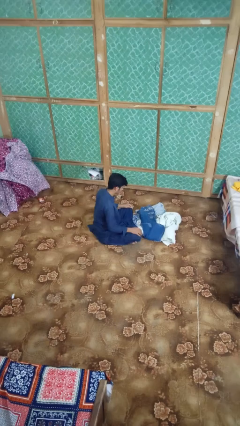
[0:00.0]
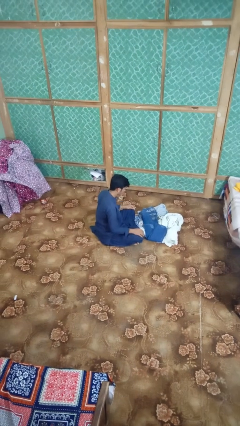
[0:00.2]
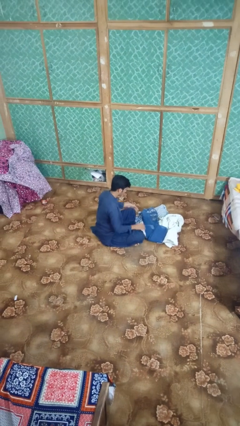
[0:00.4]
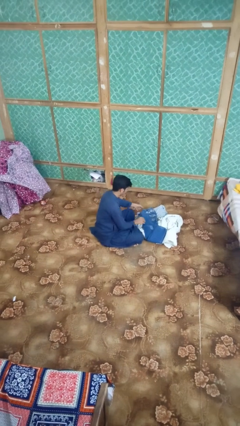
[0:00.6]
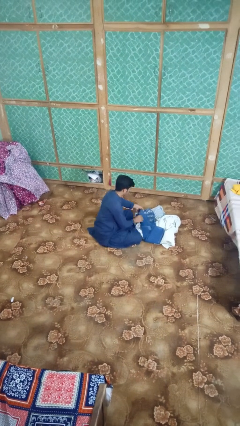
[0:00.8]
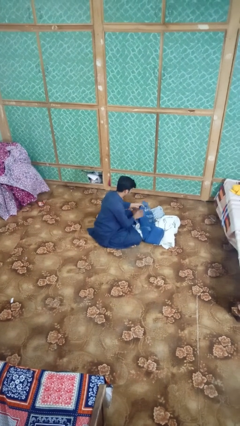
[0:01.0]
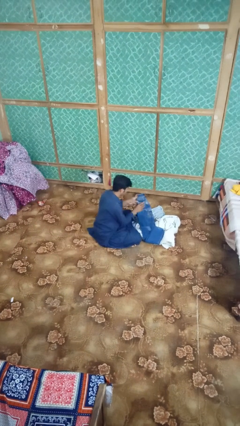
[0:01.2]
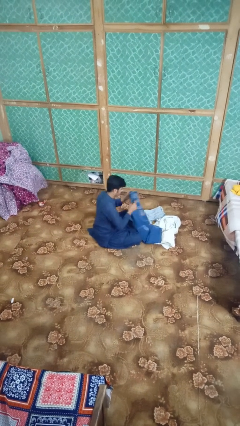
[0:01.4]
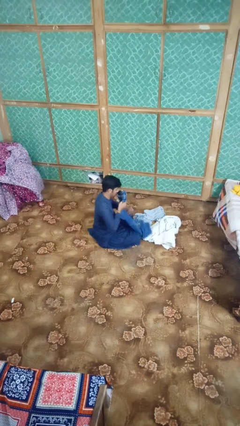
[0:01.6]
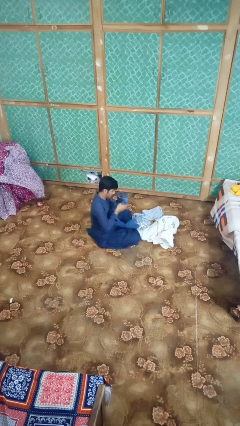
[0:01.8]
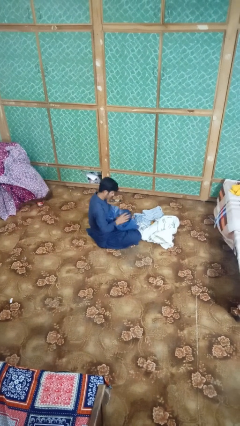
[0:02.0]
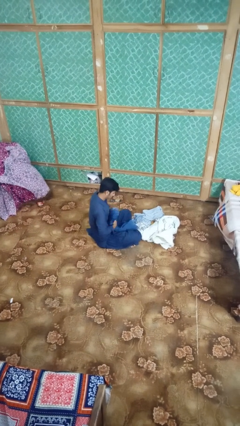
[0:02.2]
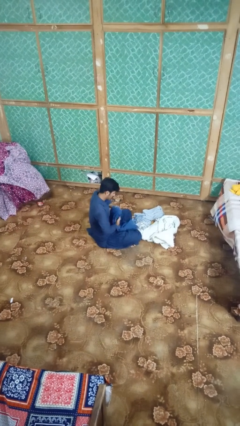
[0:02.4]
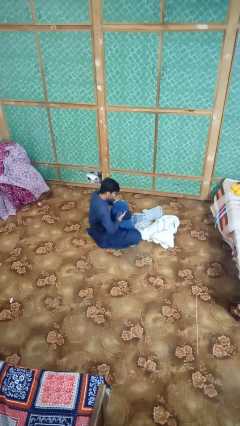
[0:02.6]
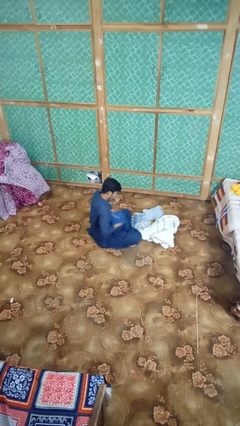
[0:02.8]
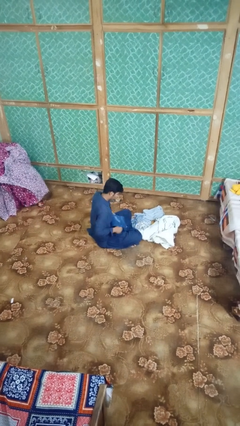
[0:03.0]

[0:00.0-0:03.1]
person folds pants

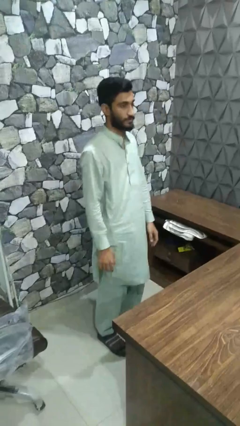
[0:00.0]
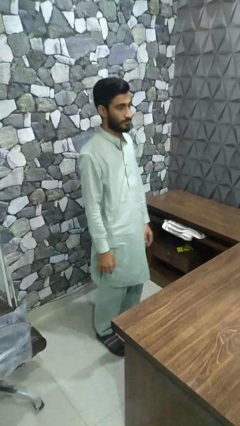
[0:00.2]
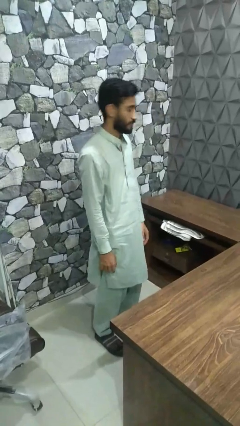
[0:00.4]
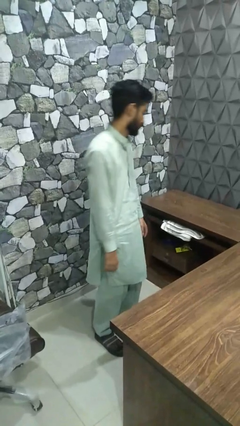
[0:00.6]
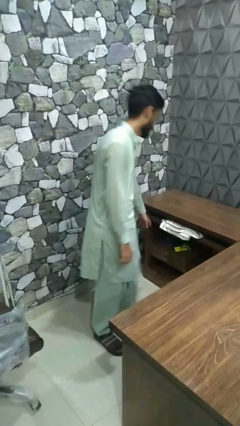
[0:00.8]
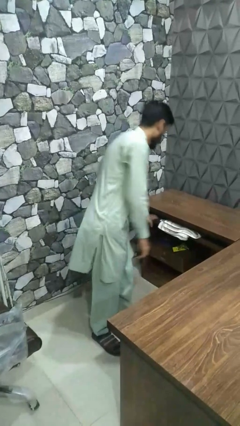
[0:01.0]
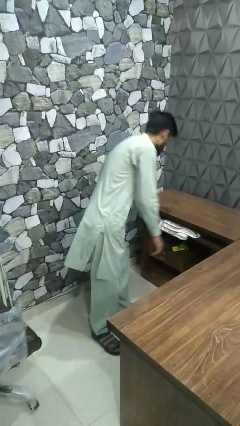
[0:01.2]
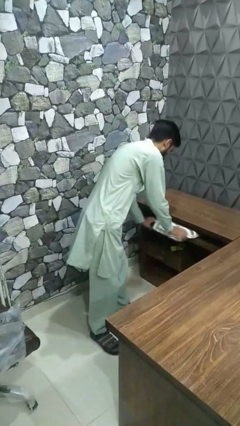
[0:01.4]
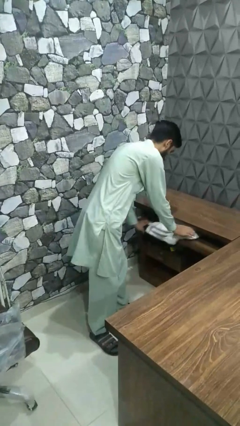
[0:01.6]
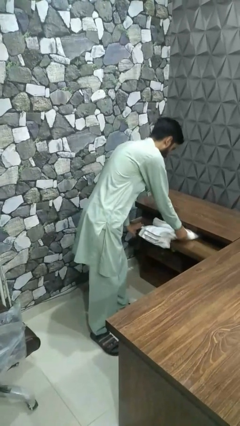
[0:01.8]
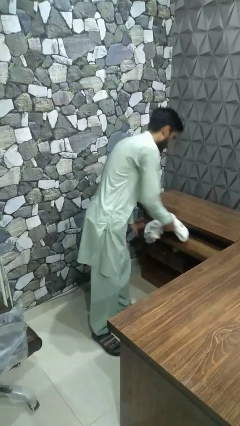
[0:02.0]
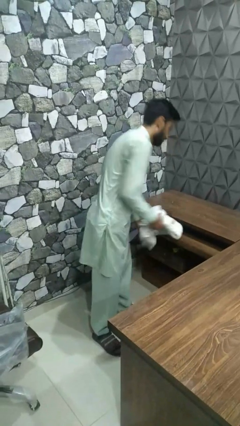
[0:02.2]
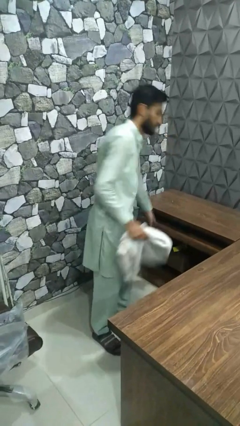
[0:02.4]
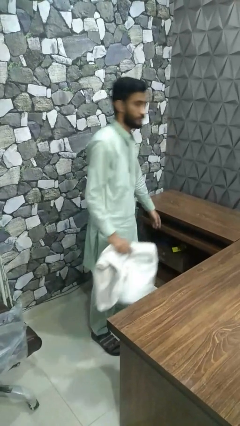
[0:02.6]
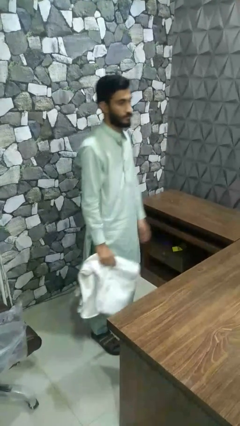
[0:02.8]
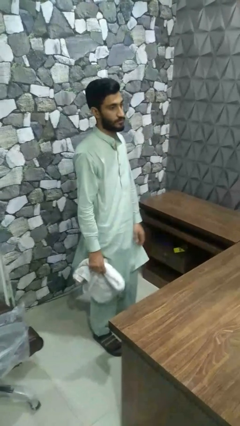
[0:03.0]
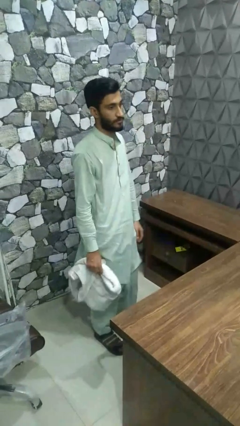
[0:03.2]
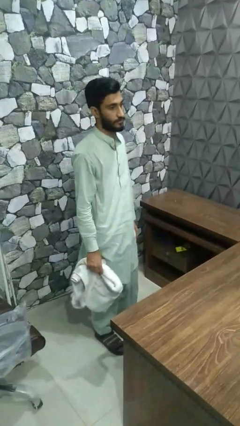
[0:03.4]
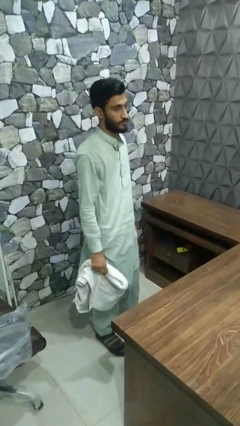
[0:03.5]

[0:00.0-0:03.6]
person takes clothes from dresser

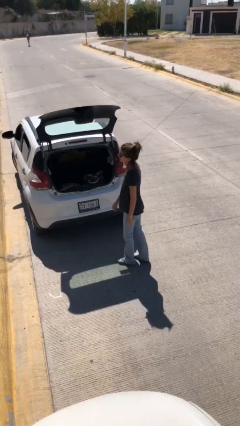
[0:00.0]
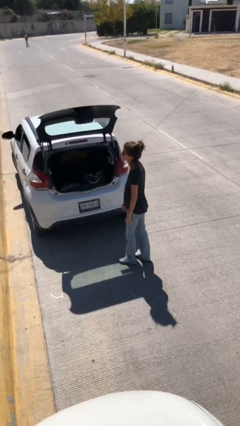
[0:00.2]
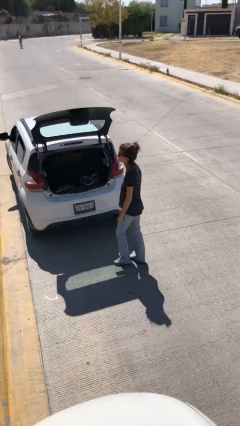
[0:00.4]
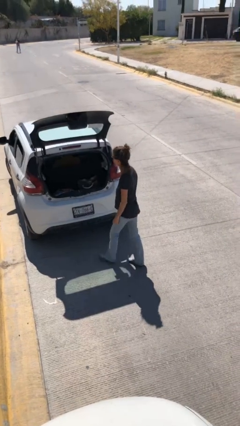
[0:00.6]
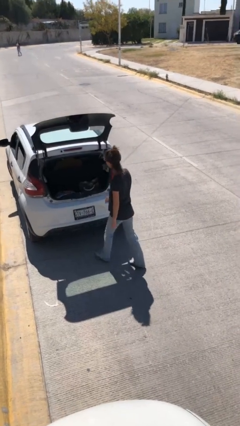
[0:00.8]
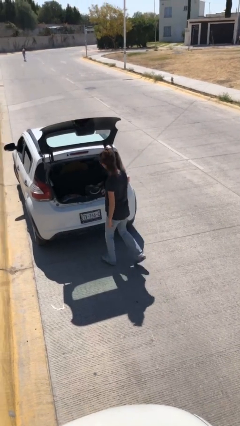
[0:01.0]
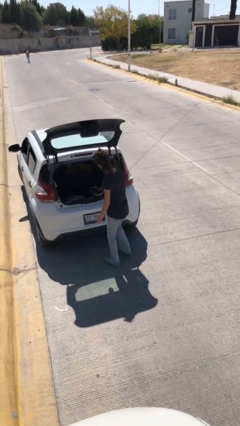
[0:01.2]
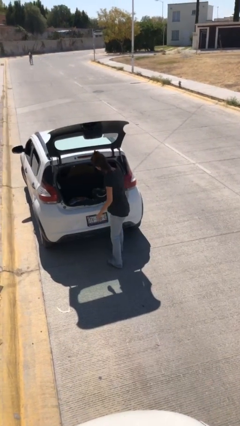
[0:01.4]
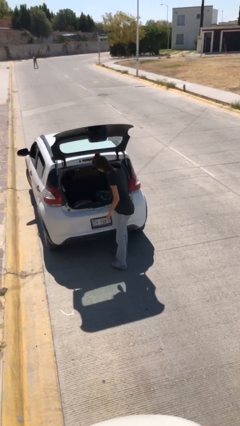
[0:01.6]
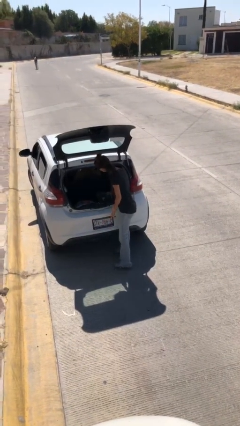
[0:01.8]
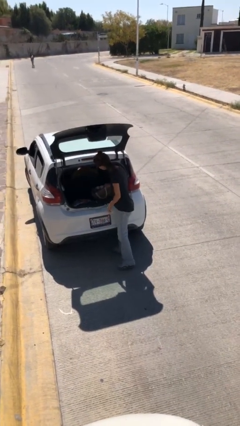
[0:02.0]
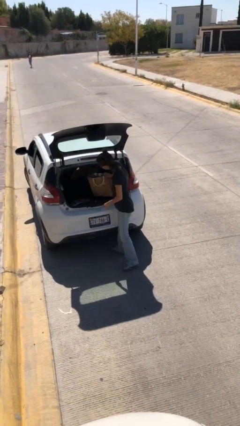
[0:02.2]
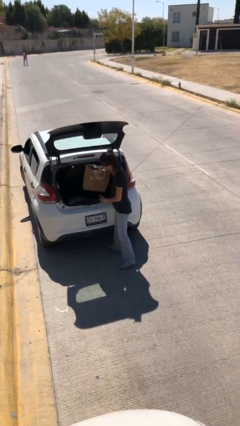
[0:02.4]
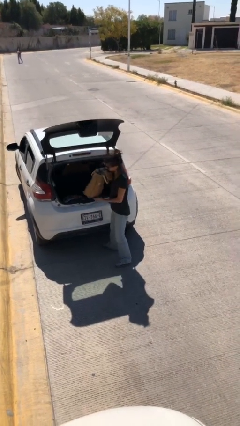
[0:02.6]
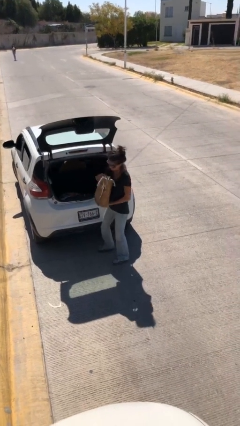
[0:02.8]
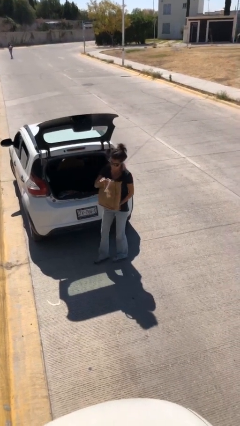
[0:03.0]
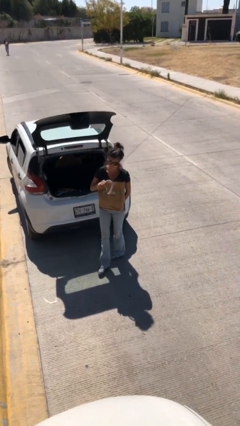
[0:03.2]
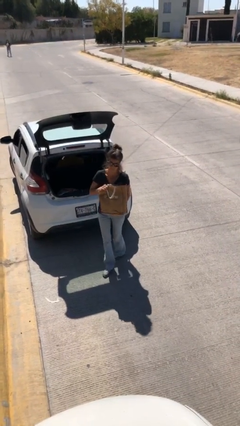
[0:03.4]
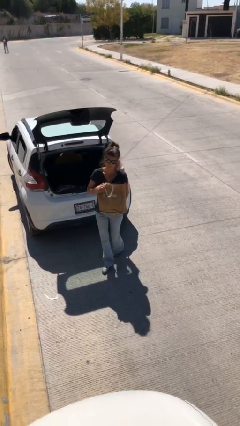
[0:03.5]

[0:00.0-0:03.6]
person unloads car

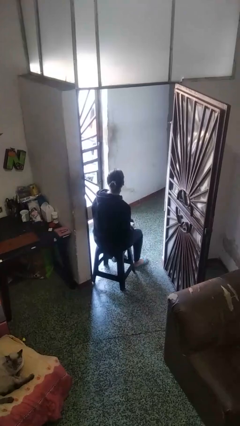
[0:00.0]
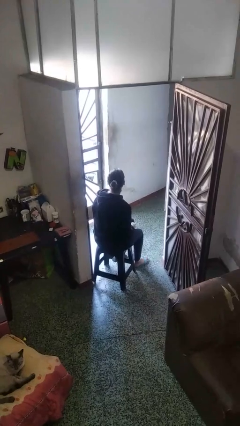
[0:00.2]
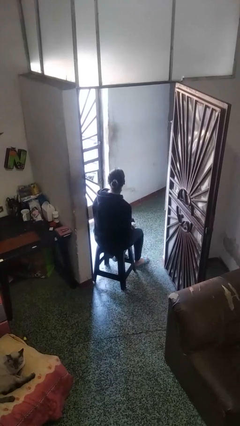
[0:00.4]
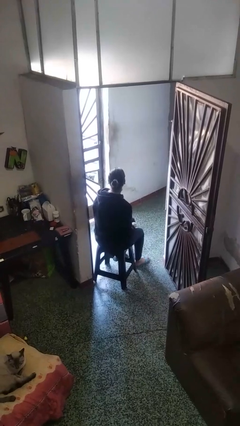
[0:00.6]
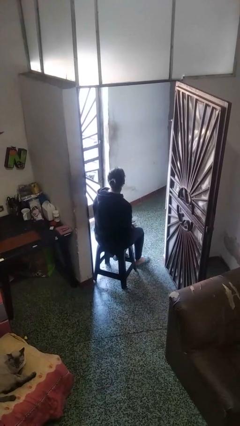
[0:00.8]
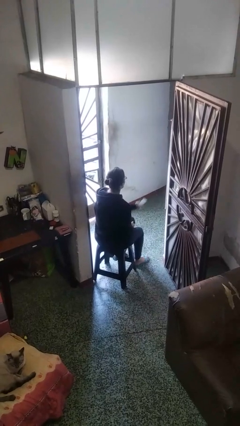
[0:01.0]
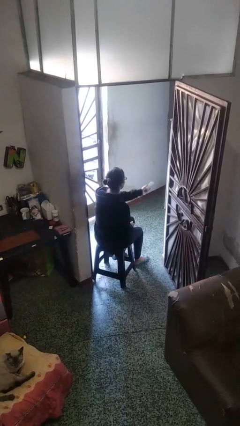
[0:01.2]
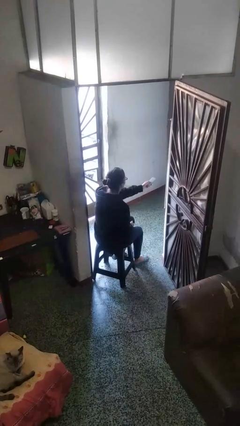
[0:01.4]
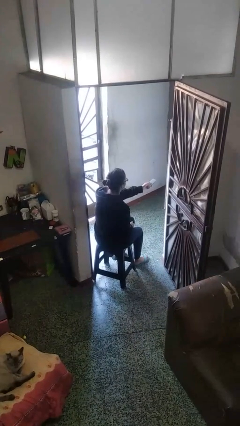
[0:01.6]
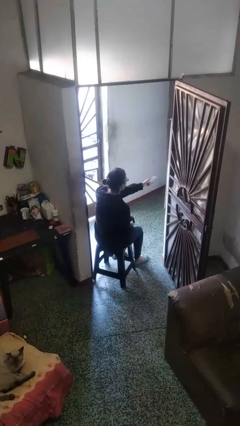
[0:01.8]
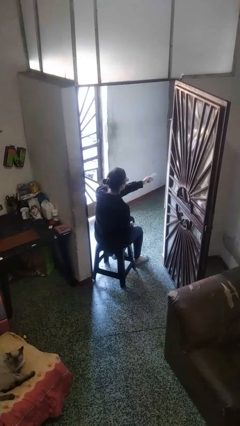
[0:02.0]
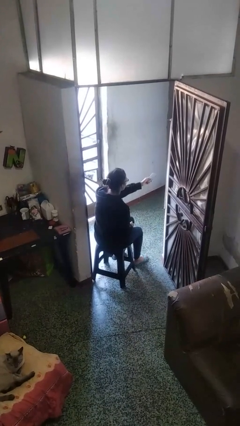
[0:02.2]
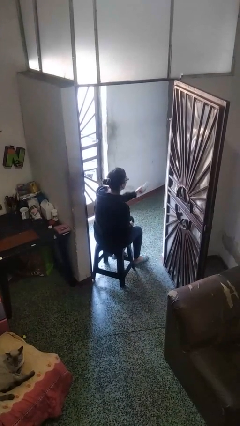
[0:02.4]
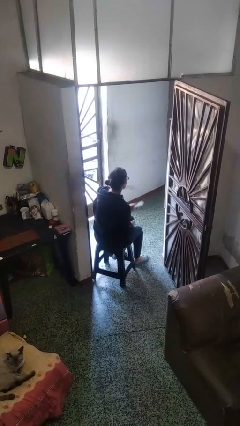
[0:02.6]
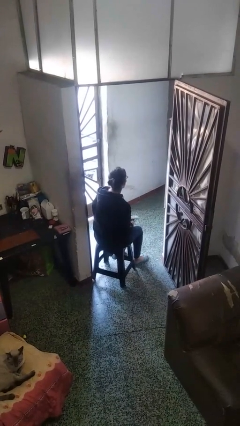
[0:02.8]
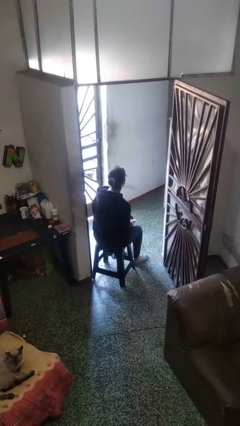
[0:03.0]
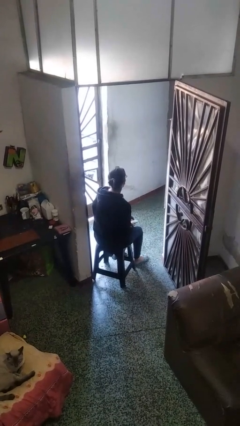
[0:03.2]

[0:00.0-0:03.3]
person uses television remote

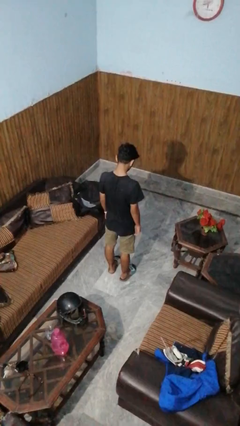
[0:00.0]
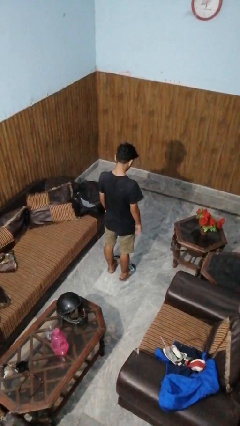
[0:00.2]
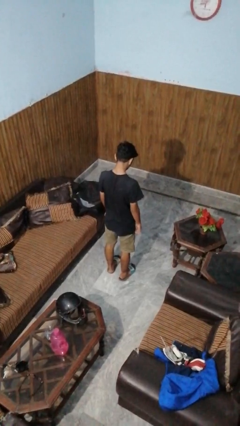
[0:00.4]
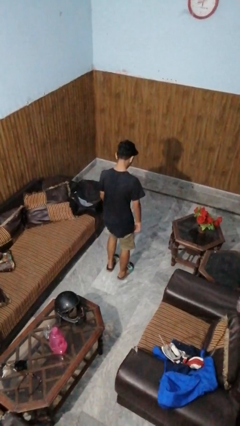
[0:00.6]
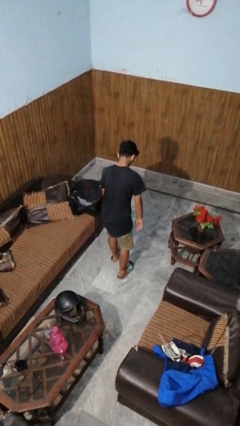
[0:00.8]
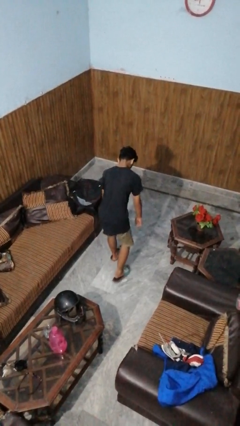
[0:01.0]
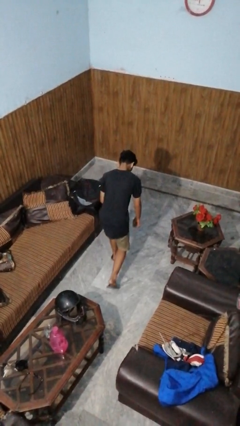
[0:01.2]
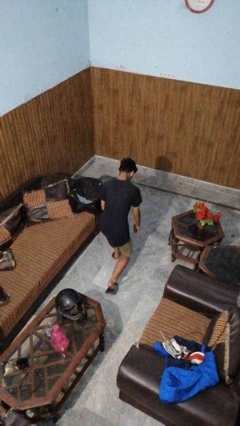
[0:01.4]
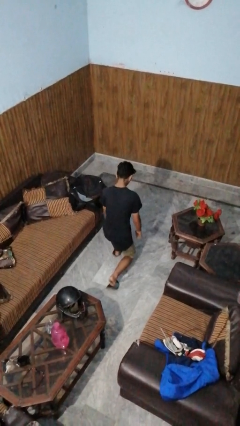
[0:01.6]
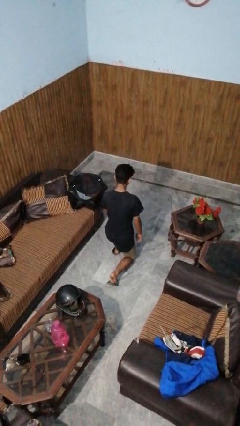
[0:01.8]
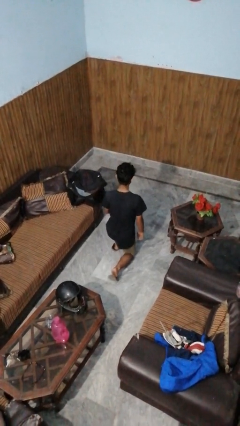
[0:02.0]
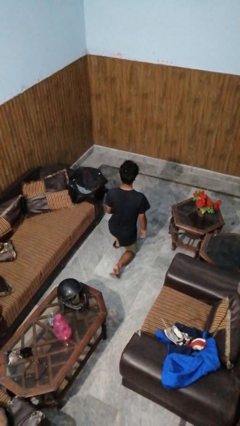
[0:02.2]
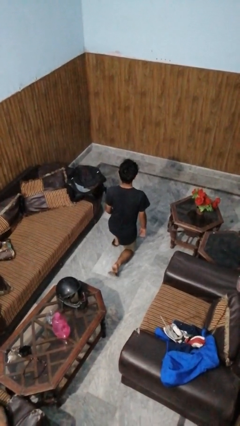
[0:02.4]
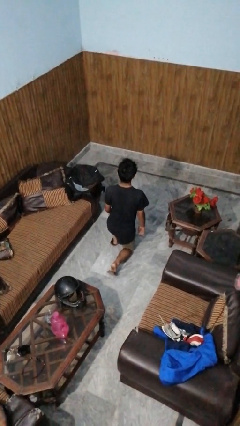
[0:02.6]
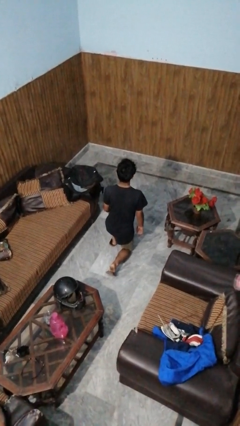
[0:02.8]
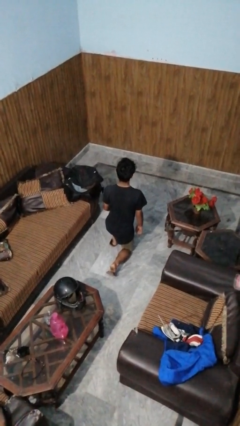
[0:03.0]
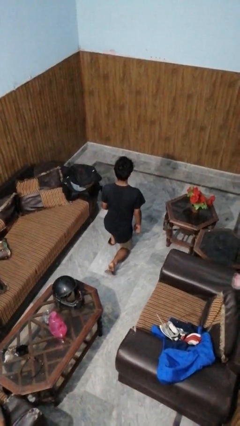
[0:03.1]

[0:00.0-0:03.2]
person kneels

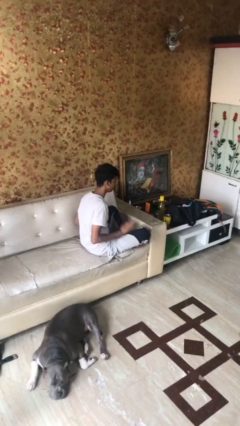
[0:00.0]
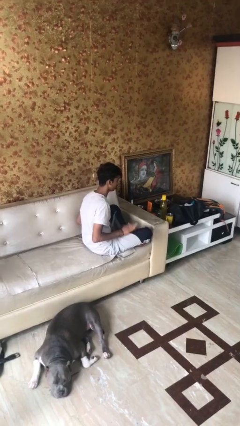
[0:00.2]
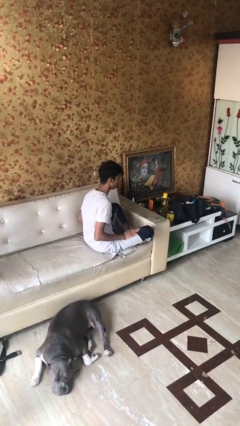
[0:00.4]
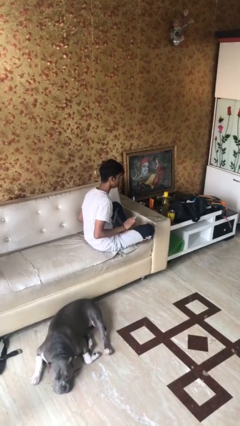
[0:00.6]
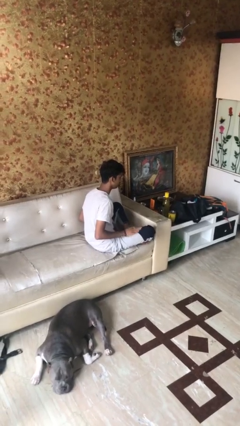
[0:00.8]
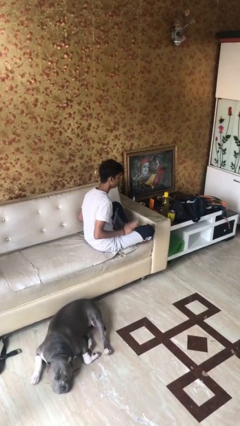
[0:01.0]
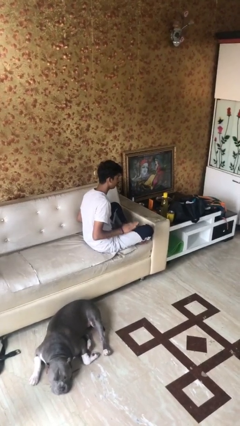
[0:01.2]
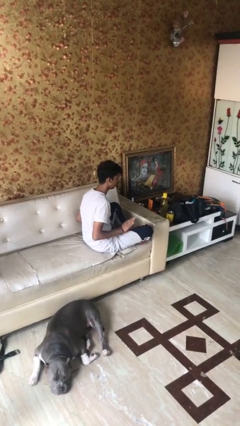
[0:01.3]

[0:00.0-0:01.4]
person slaps hands on thighs
